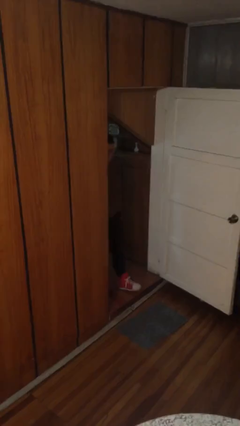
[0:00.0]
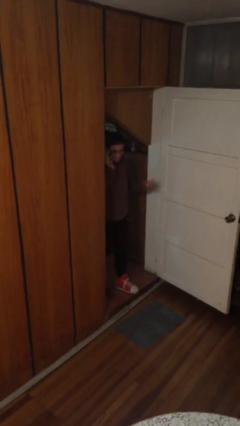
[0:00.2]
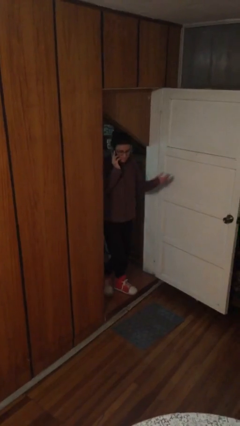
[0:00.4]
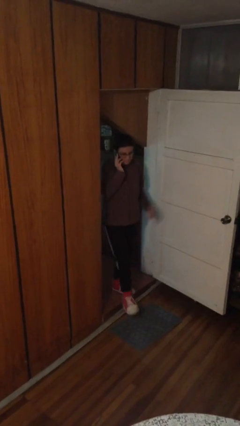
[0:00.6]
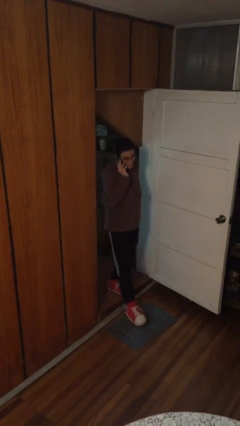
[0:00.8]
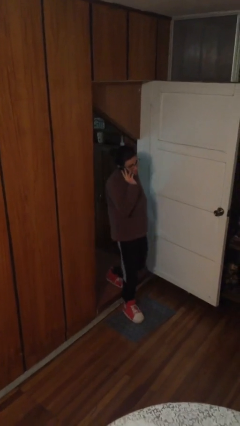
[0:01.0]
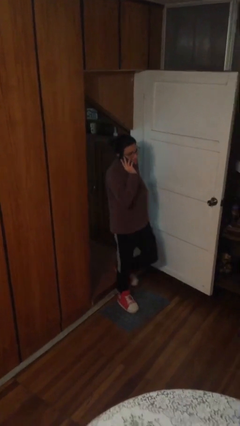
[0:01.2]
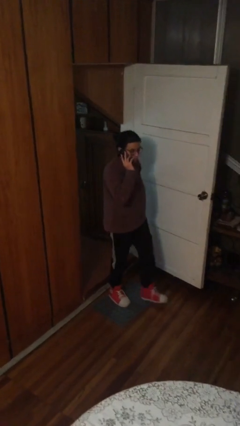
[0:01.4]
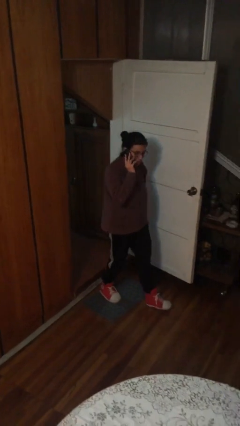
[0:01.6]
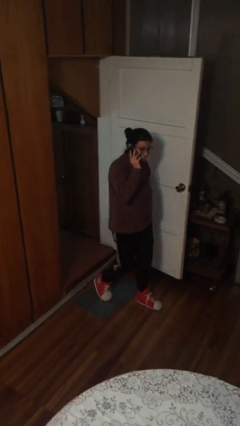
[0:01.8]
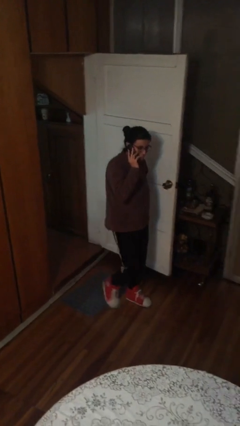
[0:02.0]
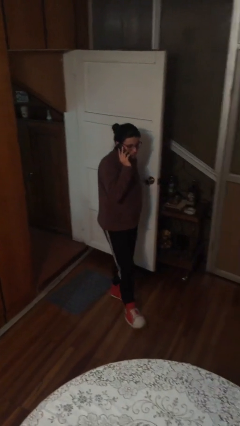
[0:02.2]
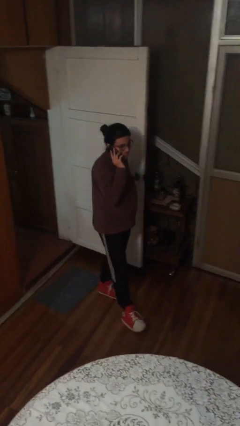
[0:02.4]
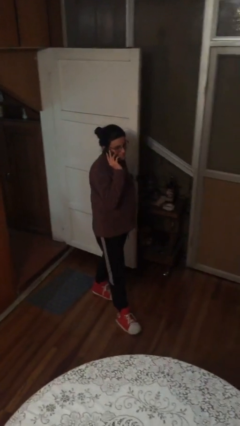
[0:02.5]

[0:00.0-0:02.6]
person enters scene through structure

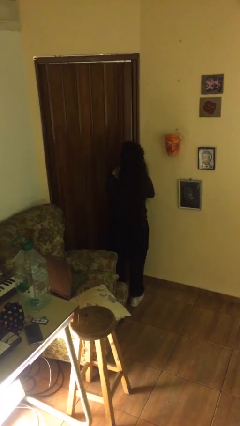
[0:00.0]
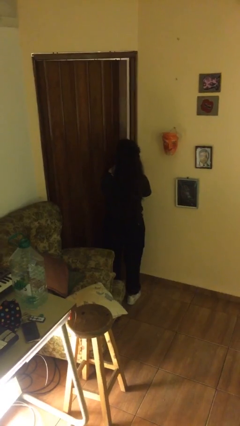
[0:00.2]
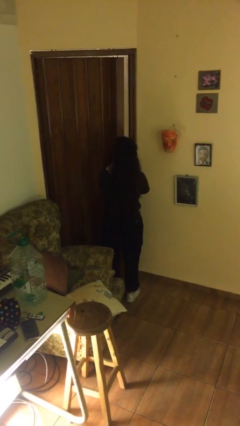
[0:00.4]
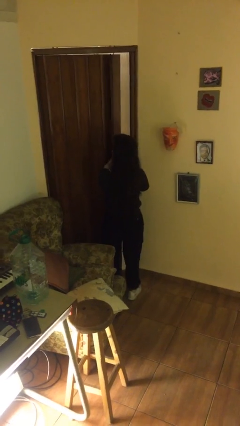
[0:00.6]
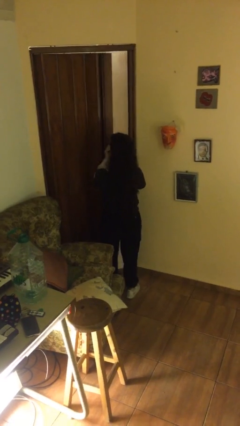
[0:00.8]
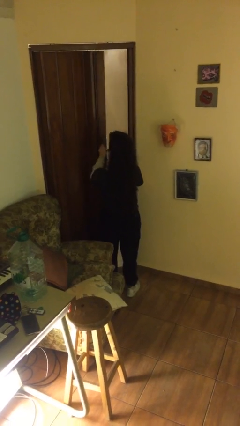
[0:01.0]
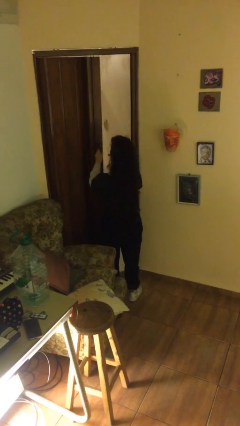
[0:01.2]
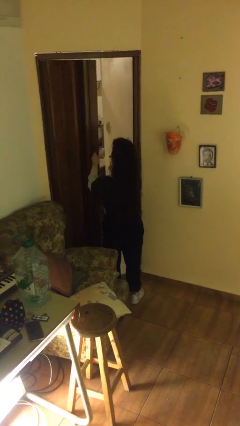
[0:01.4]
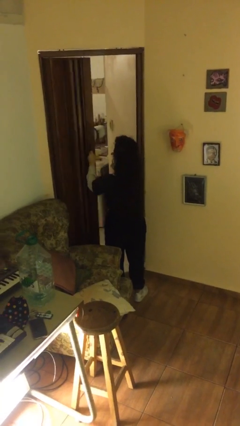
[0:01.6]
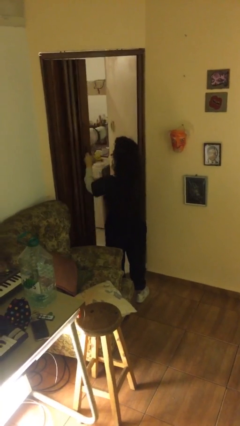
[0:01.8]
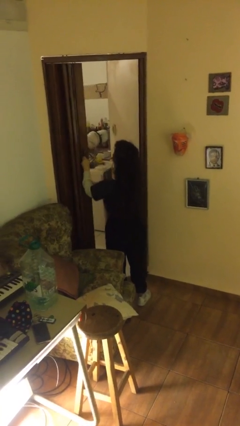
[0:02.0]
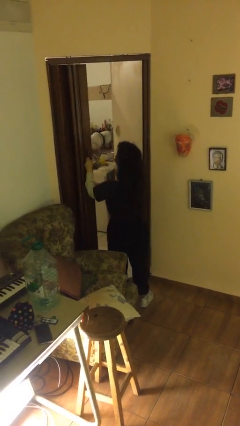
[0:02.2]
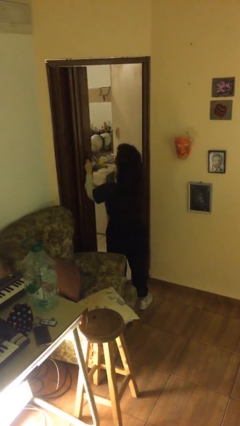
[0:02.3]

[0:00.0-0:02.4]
person opens sliding door

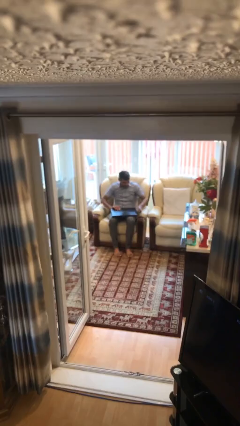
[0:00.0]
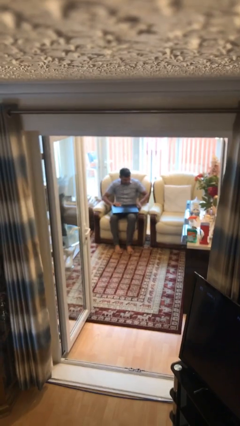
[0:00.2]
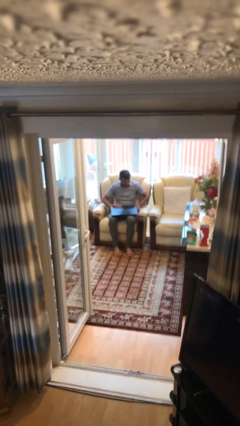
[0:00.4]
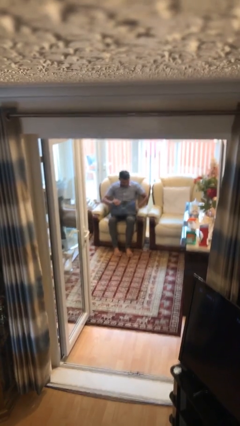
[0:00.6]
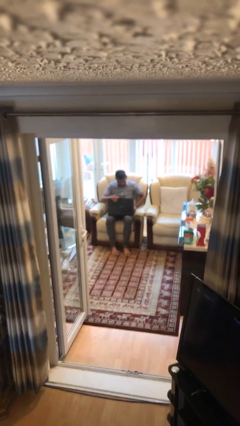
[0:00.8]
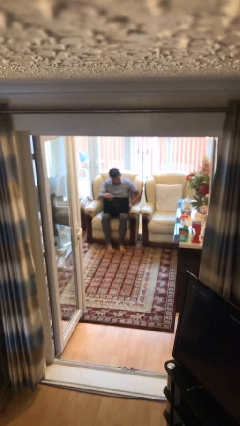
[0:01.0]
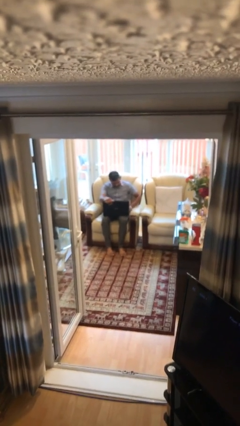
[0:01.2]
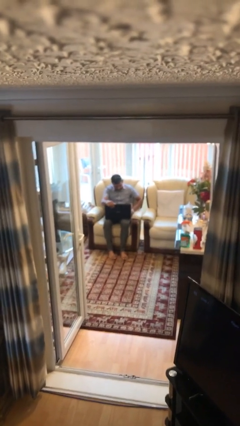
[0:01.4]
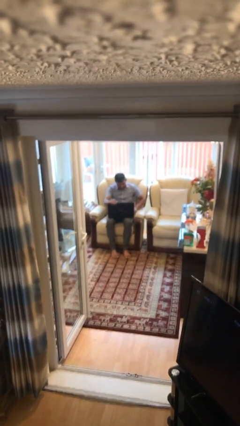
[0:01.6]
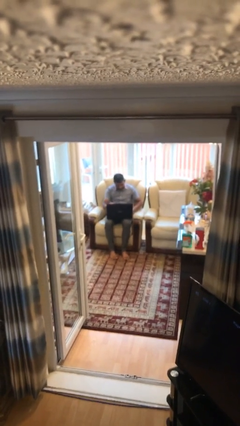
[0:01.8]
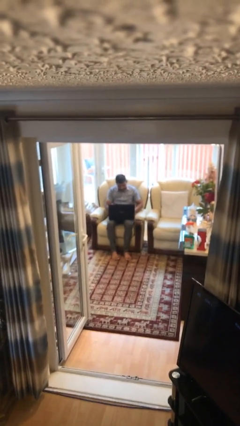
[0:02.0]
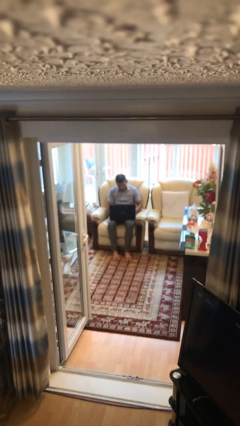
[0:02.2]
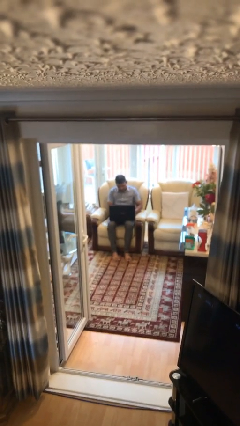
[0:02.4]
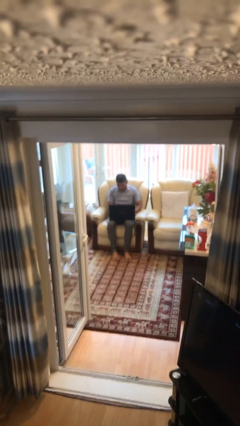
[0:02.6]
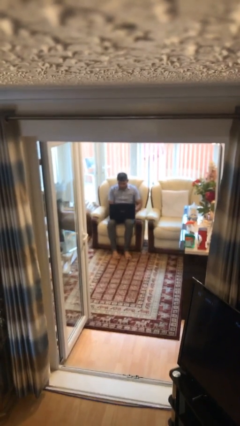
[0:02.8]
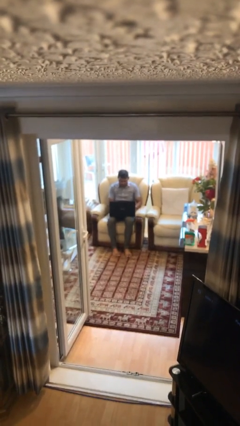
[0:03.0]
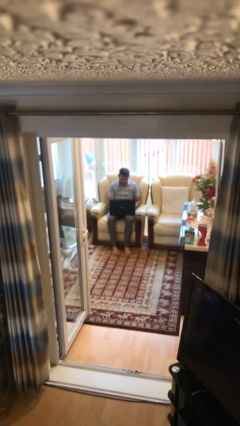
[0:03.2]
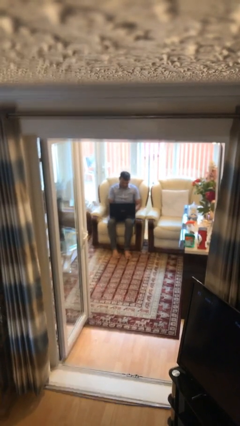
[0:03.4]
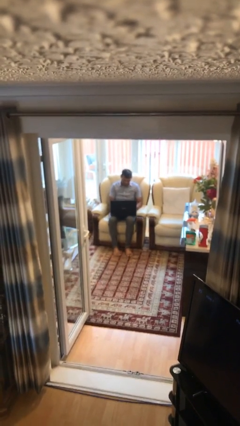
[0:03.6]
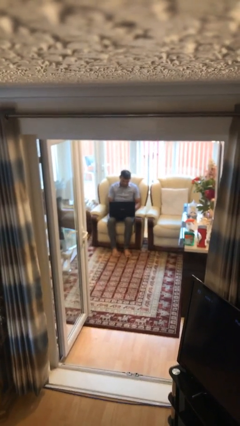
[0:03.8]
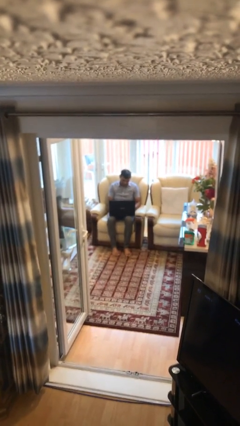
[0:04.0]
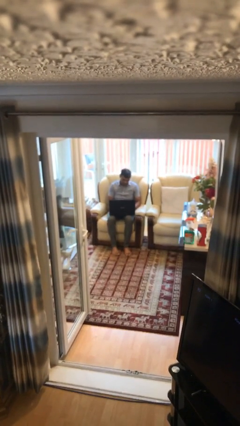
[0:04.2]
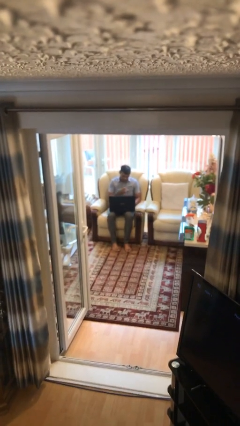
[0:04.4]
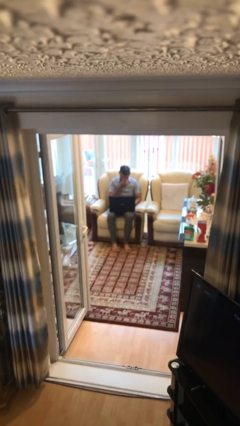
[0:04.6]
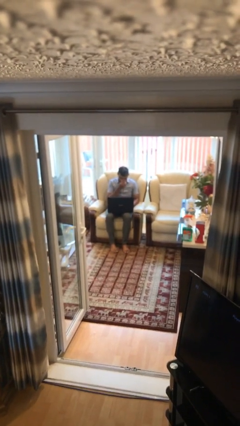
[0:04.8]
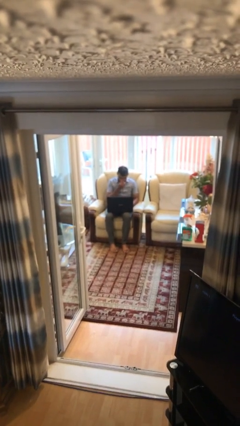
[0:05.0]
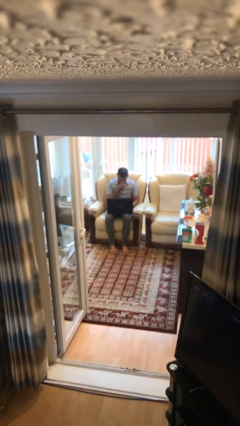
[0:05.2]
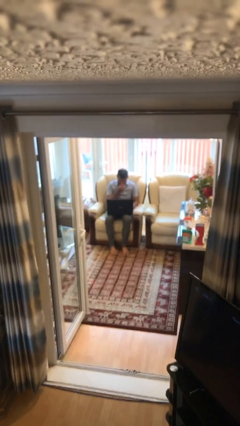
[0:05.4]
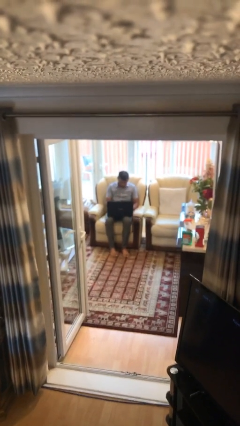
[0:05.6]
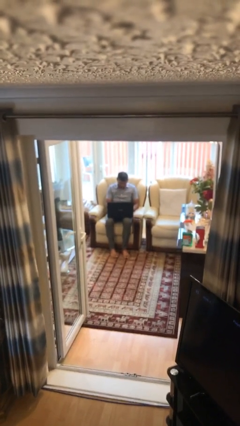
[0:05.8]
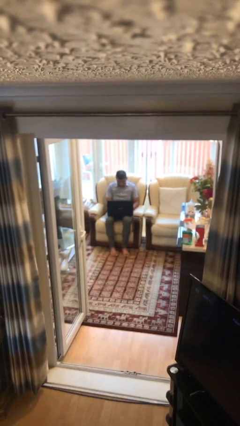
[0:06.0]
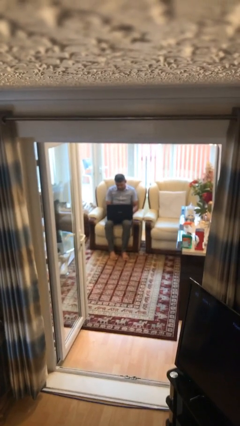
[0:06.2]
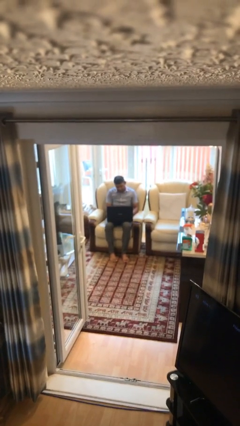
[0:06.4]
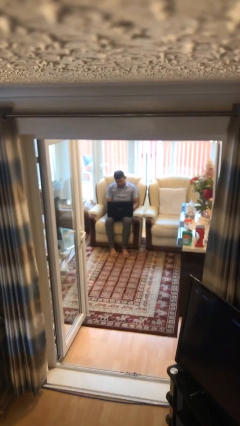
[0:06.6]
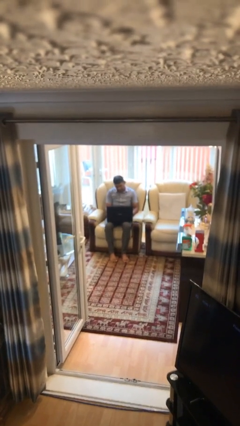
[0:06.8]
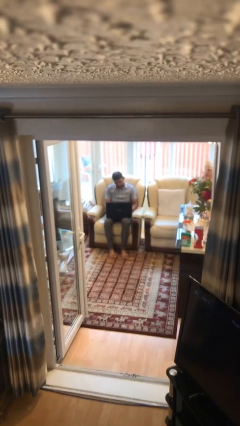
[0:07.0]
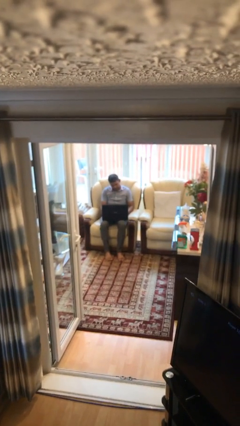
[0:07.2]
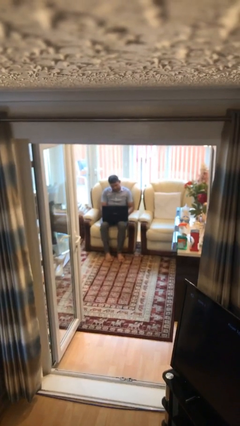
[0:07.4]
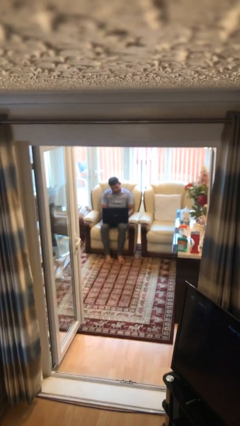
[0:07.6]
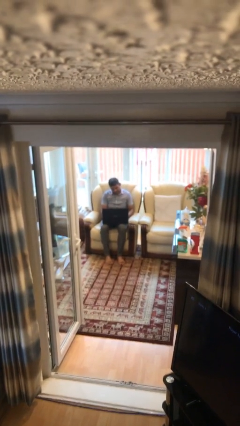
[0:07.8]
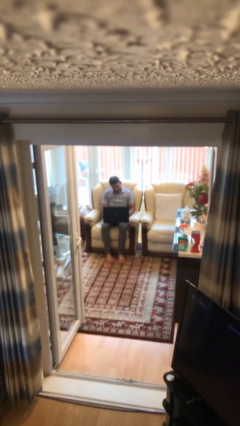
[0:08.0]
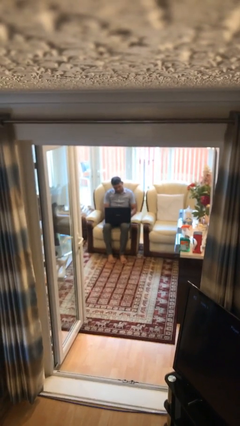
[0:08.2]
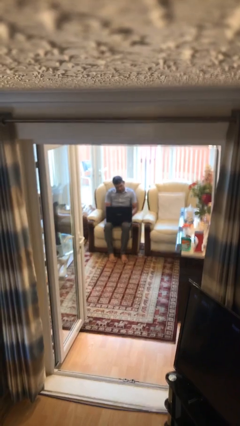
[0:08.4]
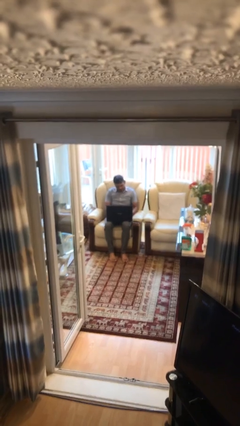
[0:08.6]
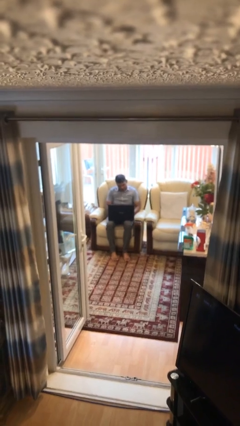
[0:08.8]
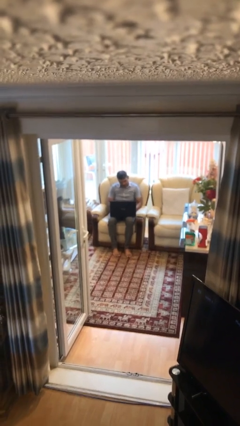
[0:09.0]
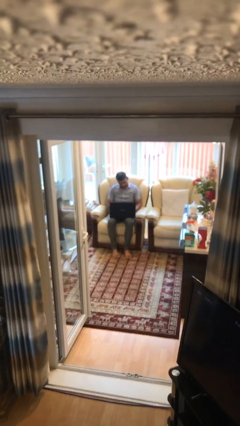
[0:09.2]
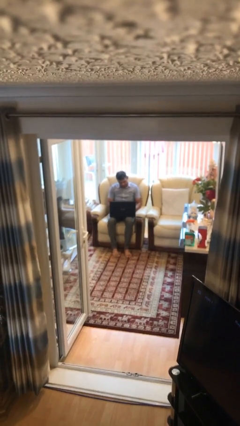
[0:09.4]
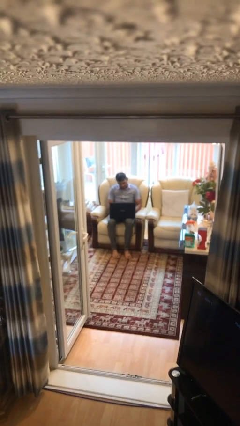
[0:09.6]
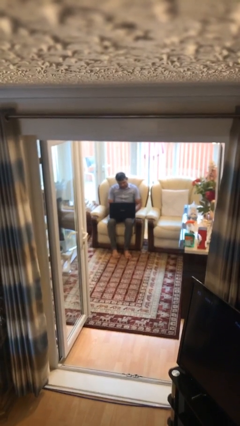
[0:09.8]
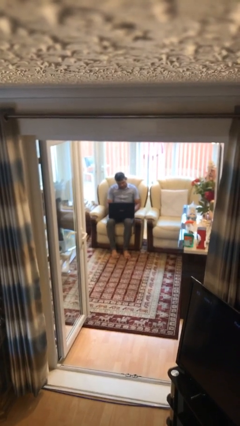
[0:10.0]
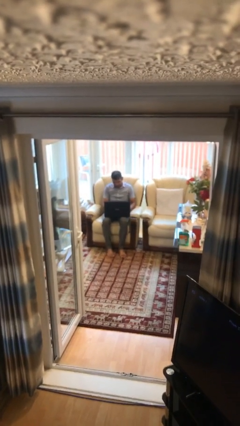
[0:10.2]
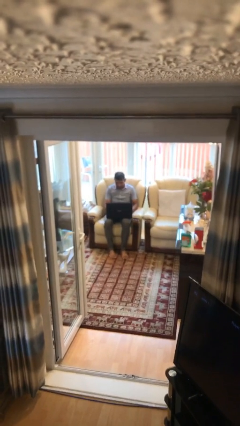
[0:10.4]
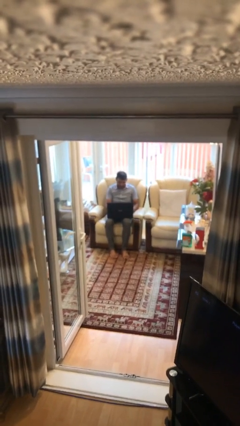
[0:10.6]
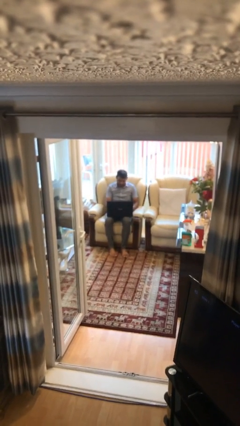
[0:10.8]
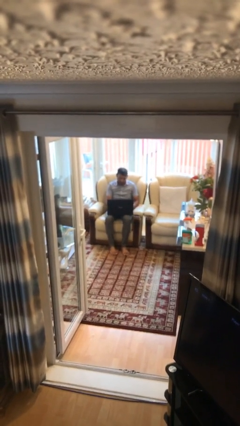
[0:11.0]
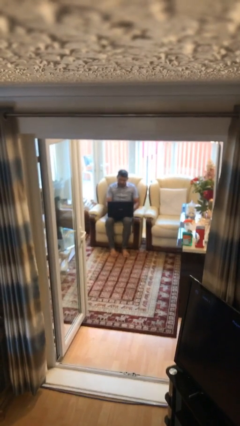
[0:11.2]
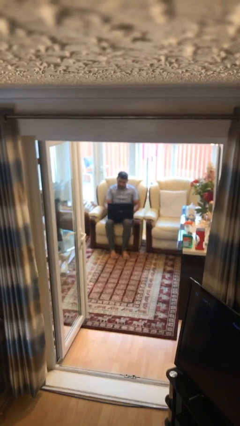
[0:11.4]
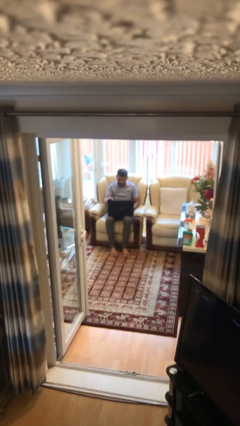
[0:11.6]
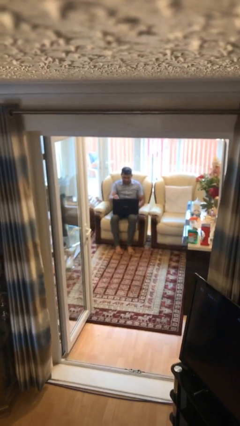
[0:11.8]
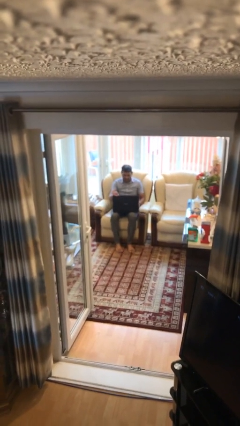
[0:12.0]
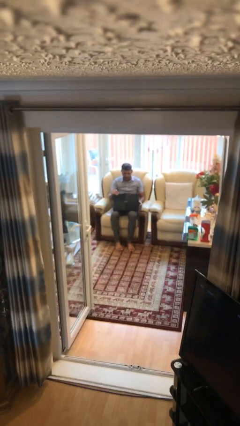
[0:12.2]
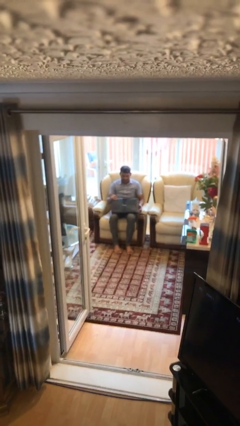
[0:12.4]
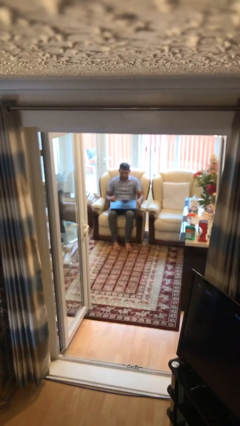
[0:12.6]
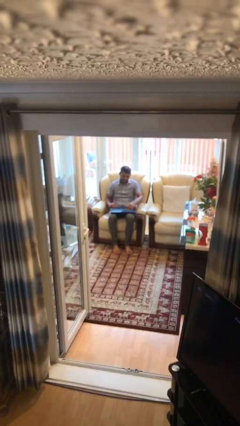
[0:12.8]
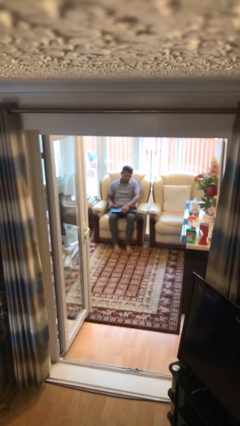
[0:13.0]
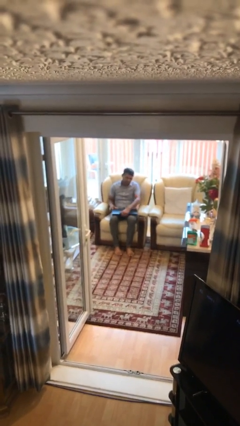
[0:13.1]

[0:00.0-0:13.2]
person interacts with laptop
